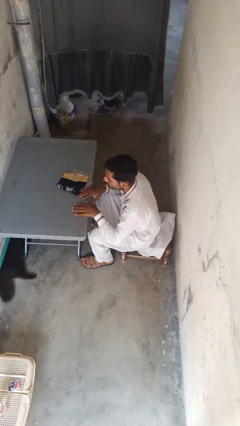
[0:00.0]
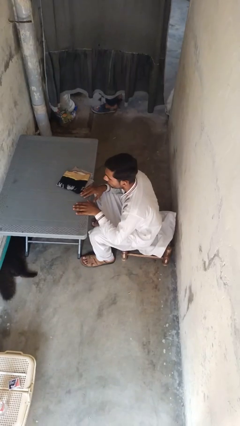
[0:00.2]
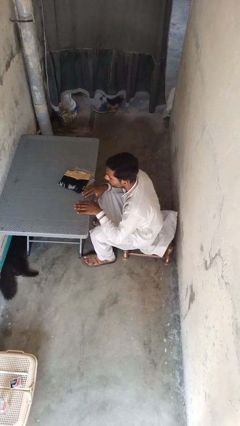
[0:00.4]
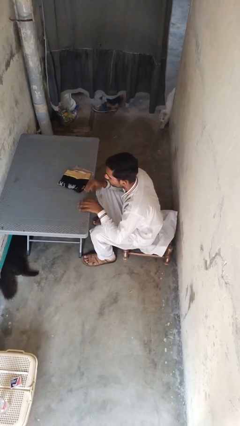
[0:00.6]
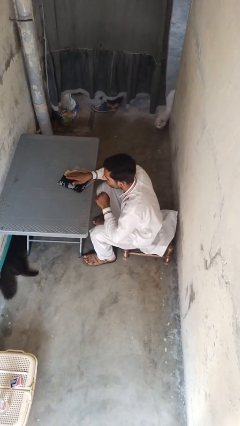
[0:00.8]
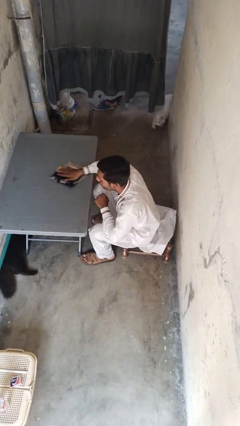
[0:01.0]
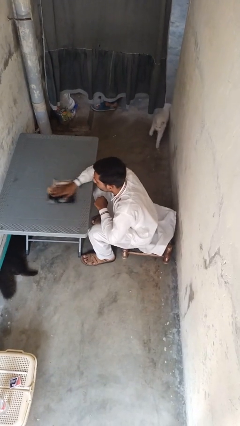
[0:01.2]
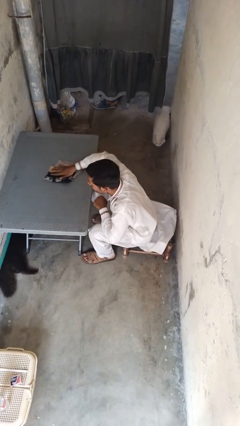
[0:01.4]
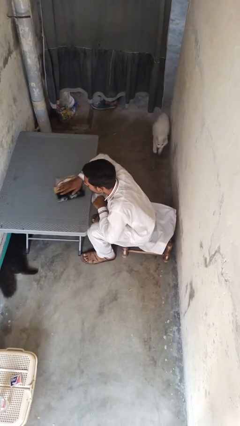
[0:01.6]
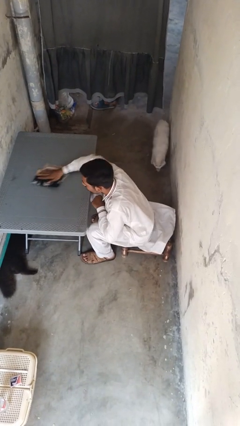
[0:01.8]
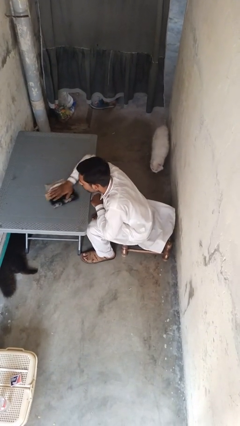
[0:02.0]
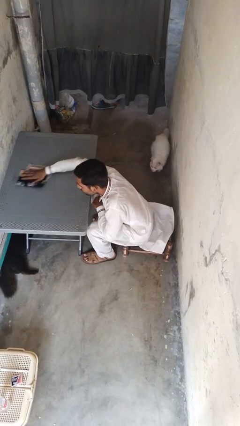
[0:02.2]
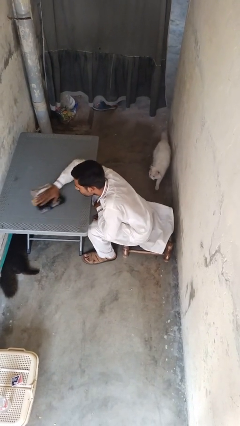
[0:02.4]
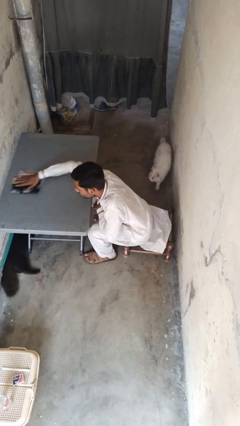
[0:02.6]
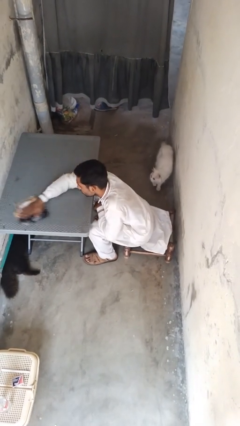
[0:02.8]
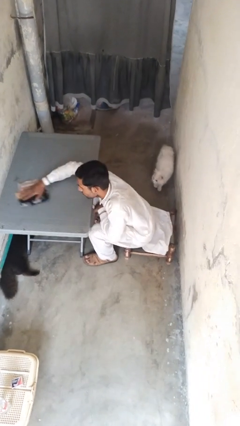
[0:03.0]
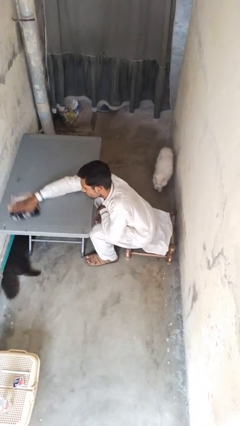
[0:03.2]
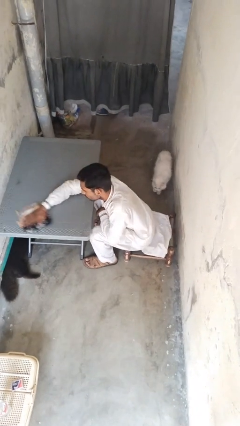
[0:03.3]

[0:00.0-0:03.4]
person cleans table with rag

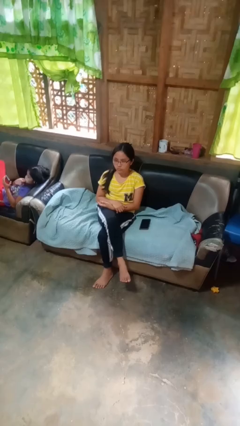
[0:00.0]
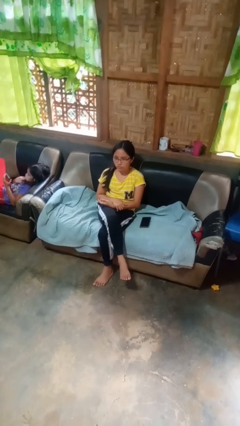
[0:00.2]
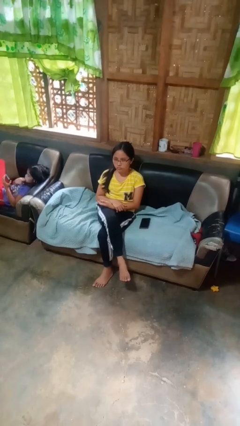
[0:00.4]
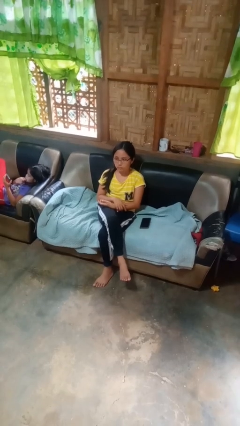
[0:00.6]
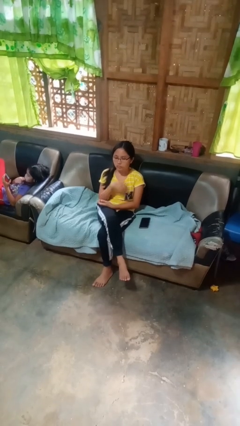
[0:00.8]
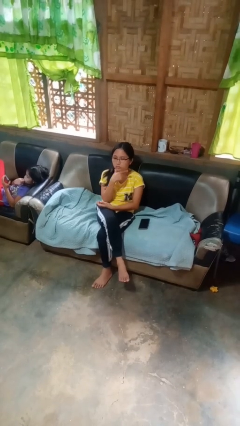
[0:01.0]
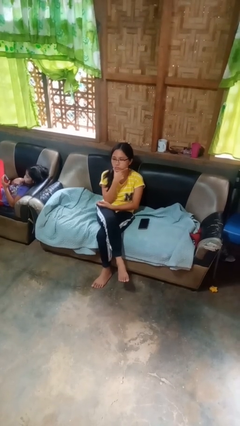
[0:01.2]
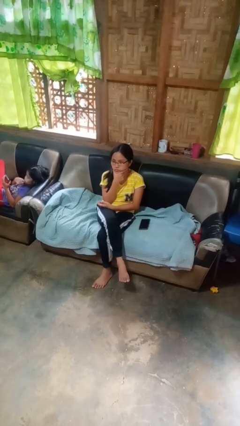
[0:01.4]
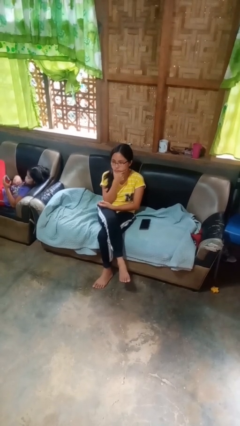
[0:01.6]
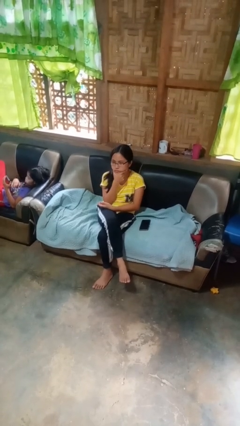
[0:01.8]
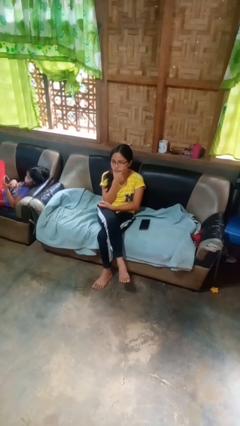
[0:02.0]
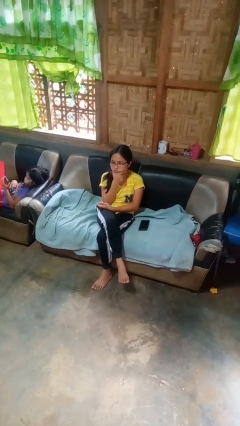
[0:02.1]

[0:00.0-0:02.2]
person strokes chin

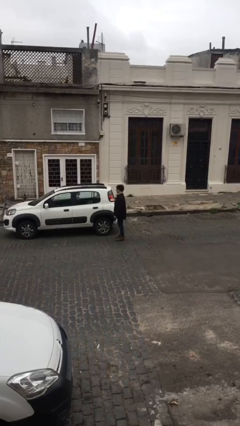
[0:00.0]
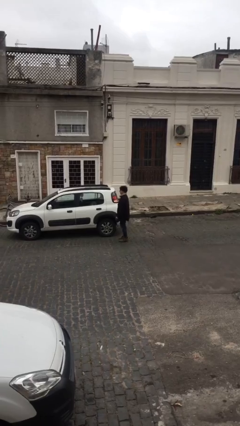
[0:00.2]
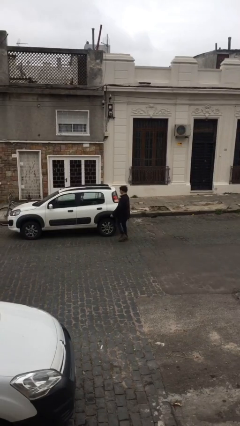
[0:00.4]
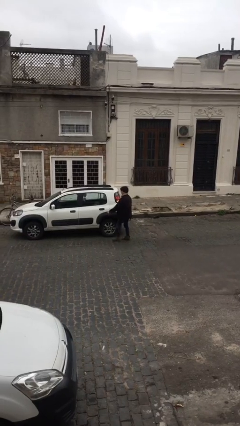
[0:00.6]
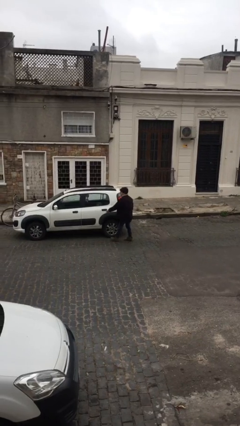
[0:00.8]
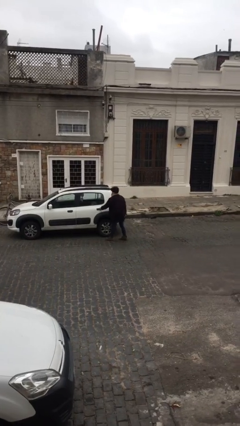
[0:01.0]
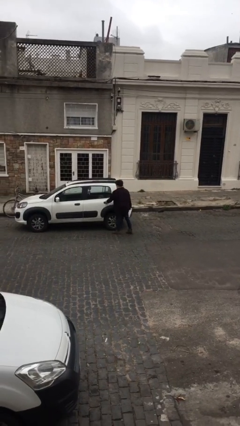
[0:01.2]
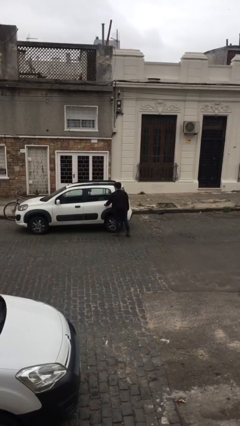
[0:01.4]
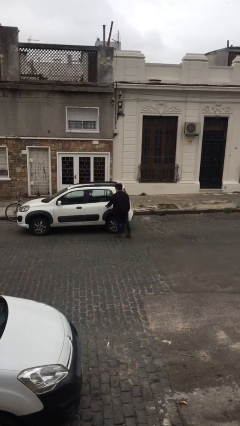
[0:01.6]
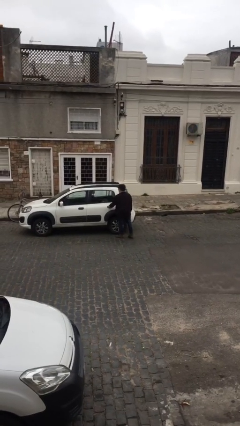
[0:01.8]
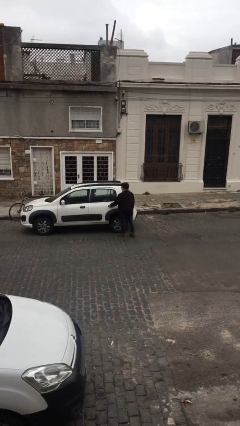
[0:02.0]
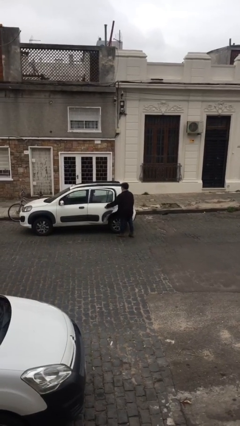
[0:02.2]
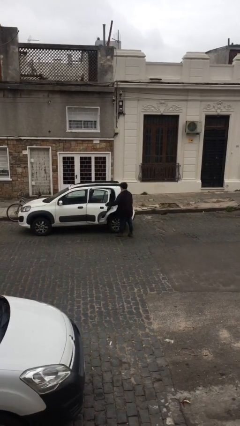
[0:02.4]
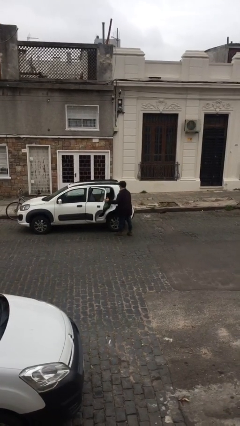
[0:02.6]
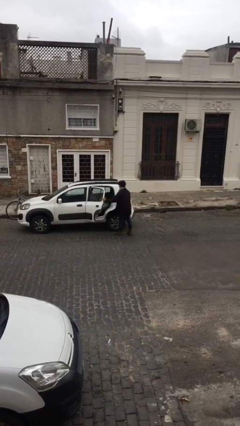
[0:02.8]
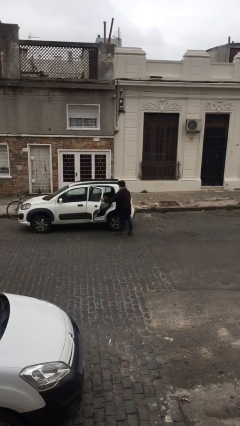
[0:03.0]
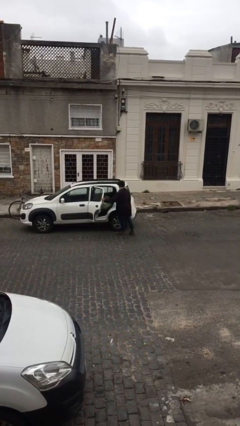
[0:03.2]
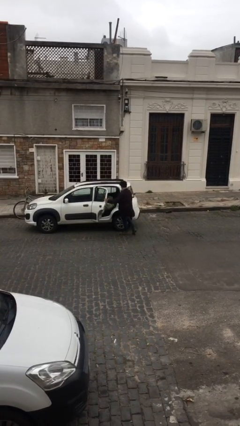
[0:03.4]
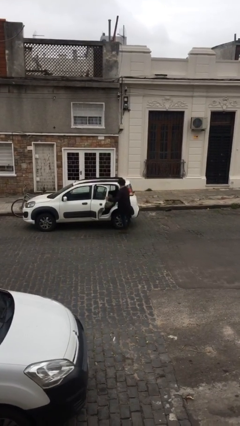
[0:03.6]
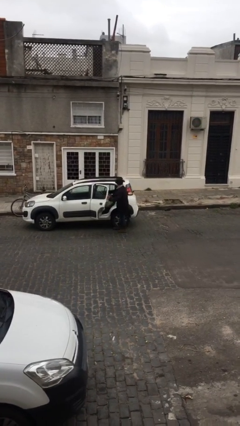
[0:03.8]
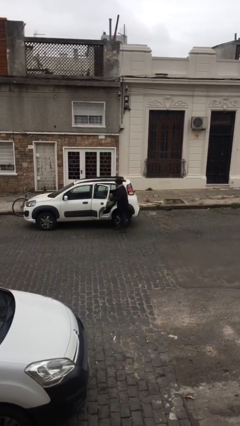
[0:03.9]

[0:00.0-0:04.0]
person opens car door

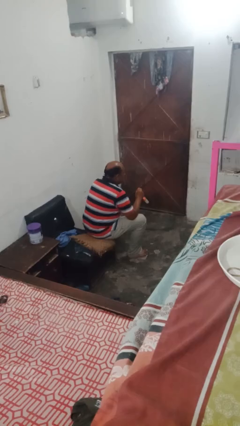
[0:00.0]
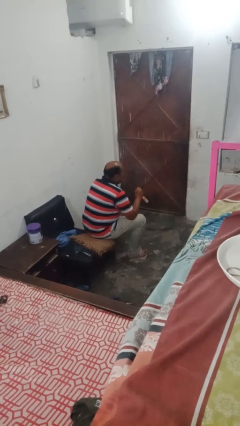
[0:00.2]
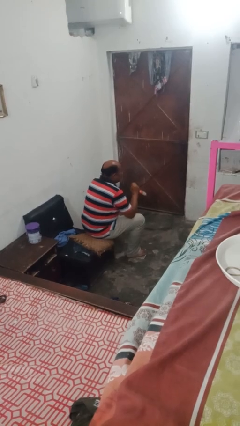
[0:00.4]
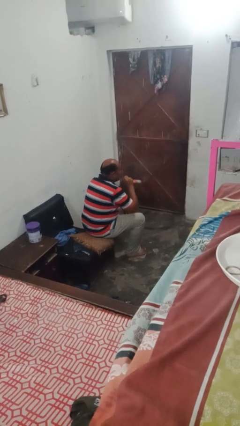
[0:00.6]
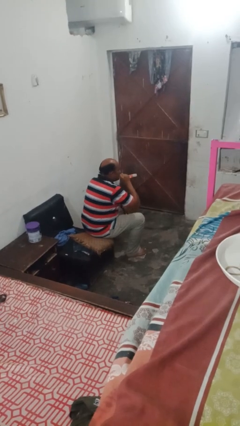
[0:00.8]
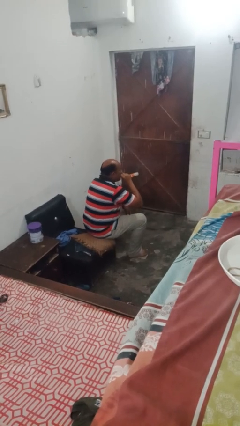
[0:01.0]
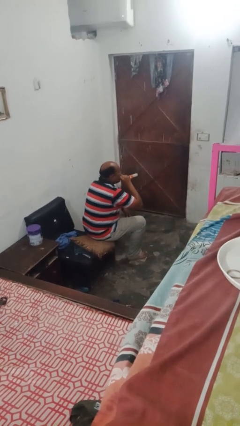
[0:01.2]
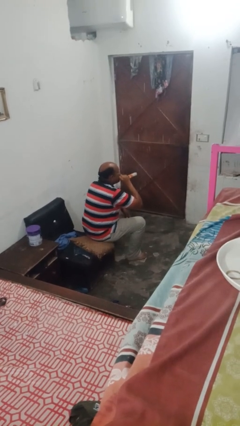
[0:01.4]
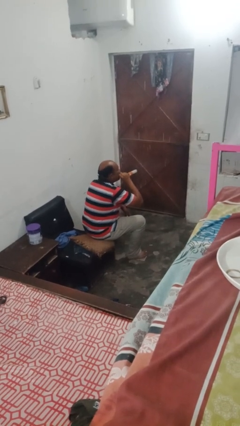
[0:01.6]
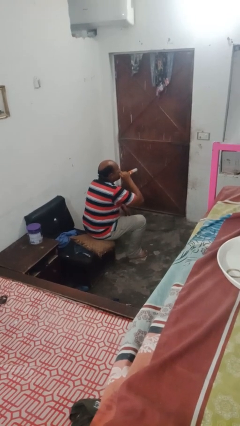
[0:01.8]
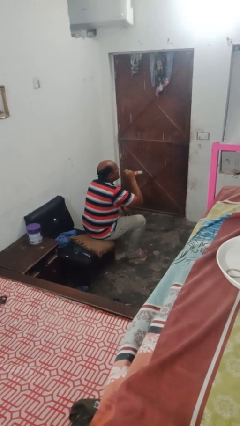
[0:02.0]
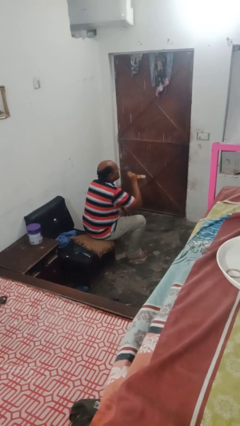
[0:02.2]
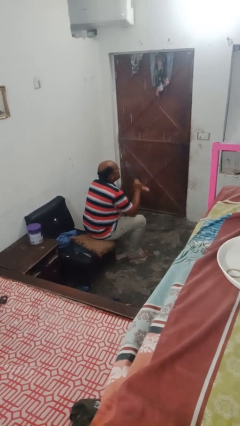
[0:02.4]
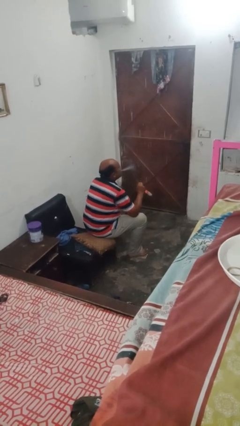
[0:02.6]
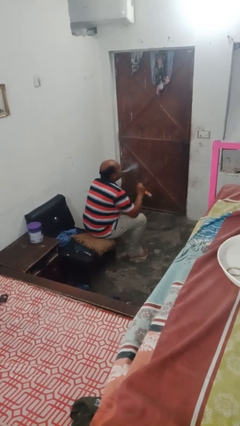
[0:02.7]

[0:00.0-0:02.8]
person vapes

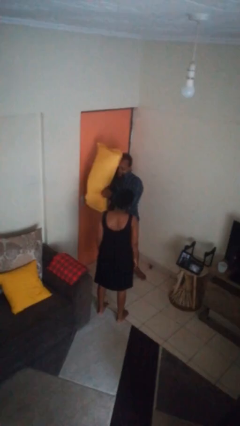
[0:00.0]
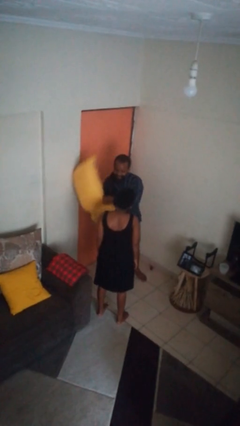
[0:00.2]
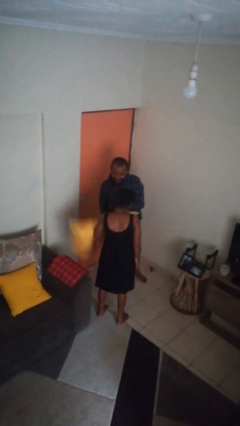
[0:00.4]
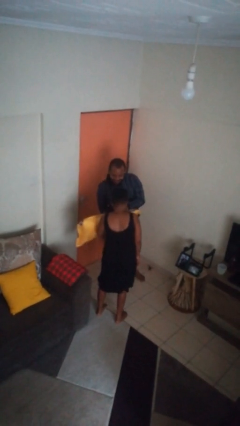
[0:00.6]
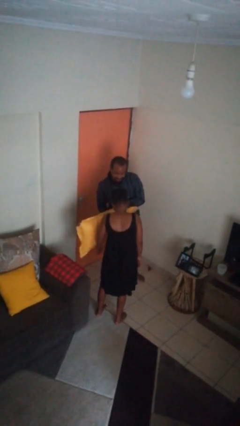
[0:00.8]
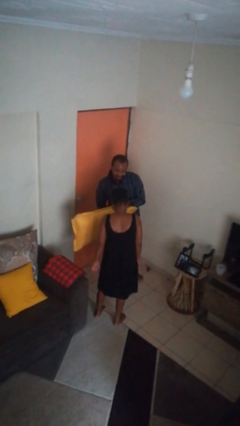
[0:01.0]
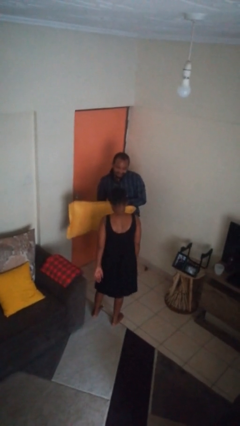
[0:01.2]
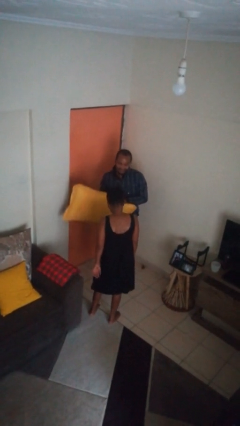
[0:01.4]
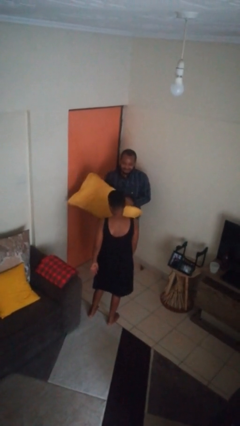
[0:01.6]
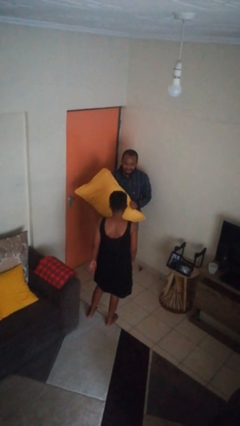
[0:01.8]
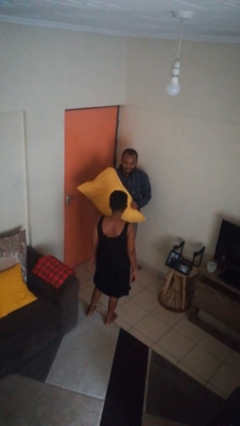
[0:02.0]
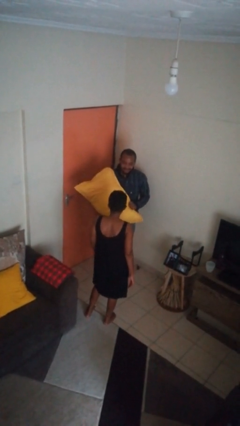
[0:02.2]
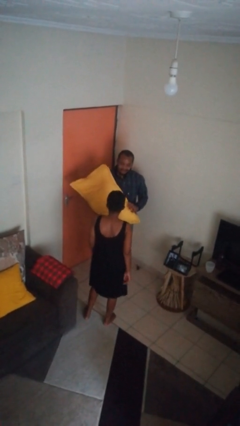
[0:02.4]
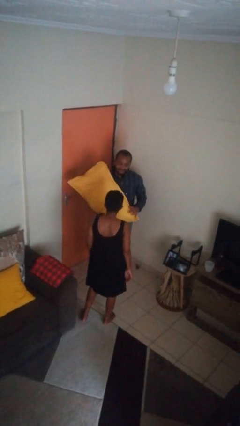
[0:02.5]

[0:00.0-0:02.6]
person hits person with pillow

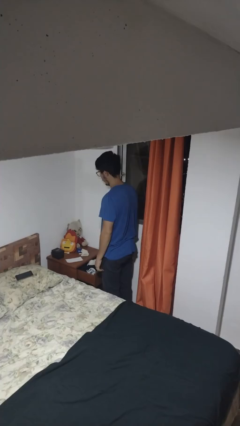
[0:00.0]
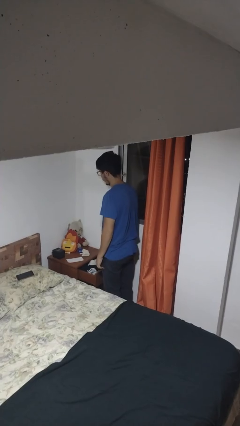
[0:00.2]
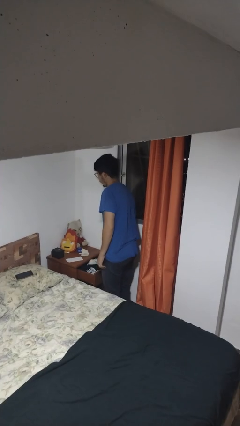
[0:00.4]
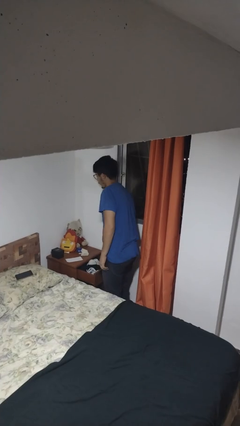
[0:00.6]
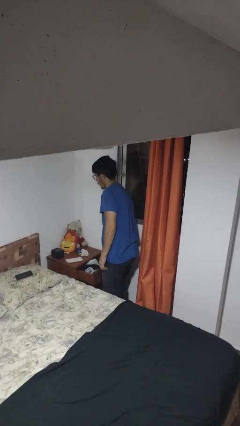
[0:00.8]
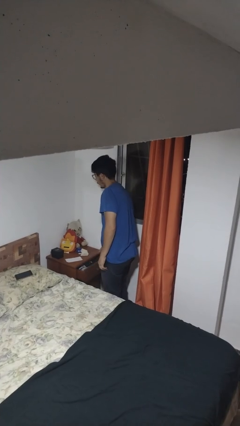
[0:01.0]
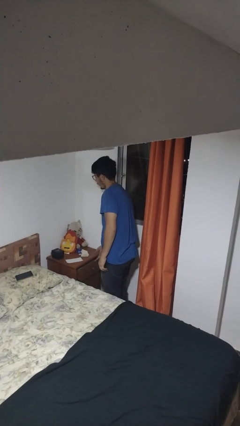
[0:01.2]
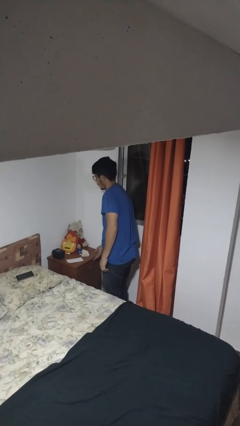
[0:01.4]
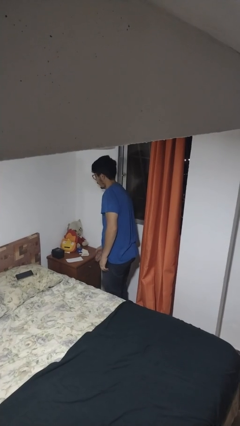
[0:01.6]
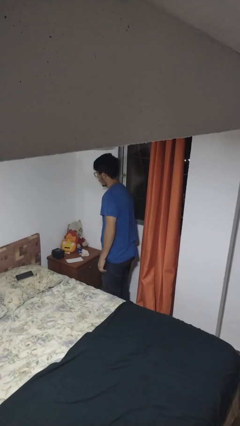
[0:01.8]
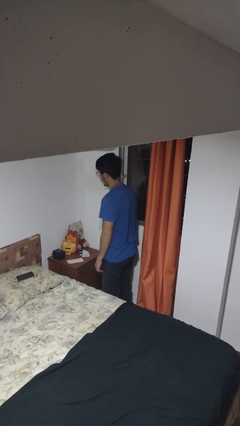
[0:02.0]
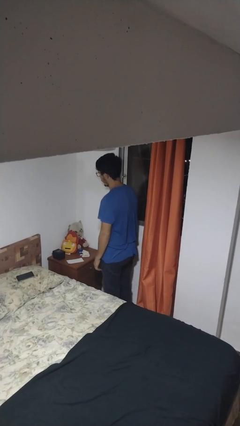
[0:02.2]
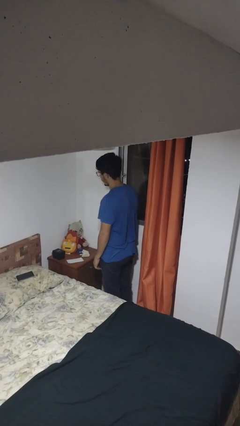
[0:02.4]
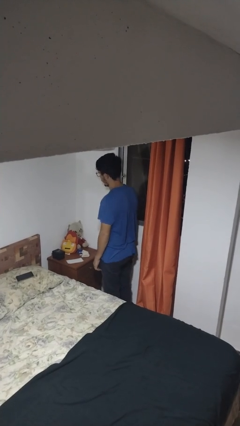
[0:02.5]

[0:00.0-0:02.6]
person closes dresser drawer
